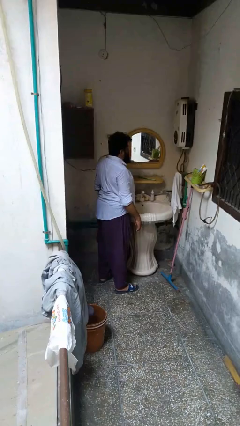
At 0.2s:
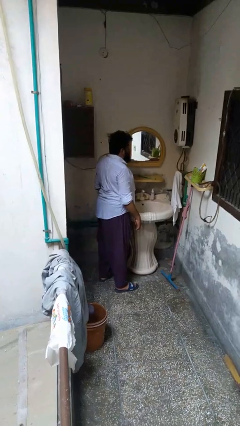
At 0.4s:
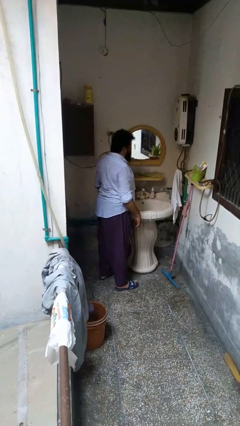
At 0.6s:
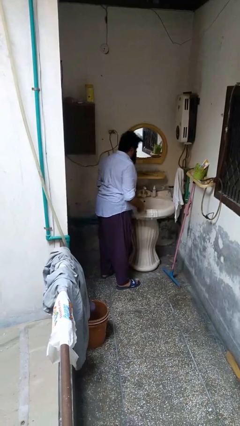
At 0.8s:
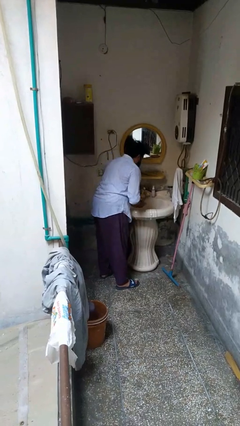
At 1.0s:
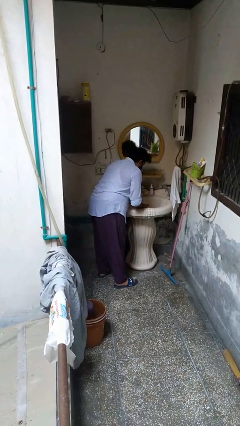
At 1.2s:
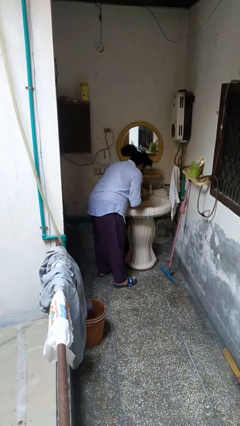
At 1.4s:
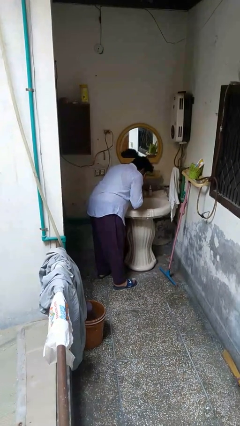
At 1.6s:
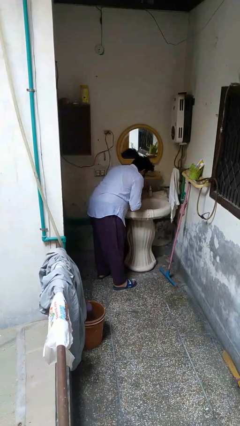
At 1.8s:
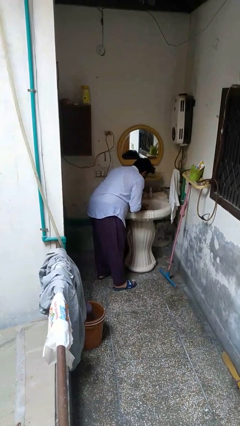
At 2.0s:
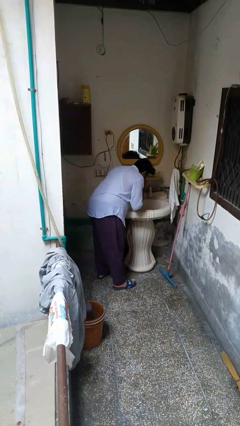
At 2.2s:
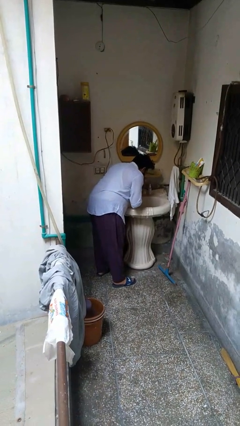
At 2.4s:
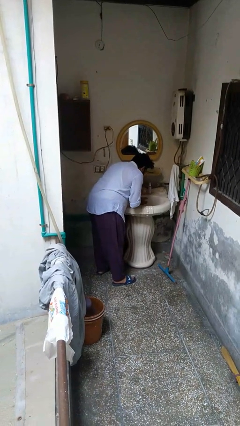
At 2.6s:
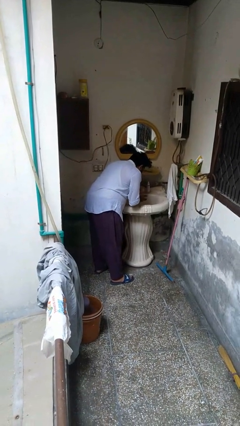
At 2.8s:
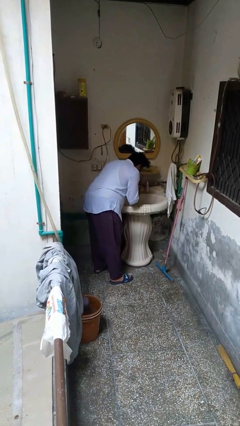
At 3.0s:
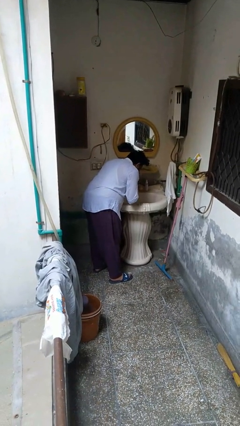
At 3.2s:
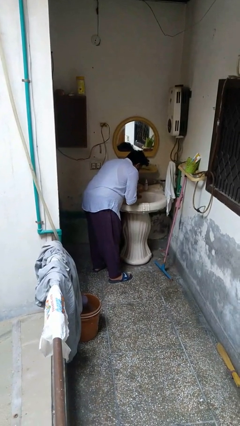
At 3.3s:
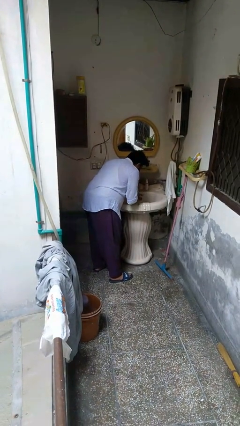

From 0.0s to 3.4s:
person washes face

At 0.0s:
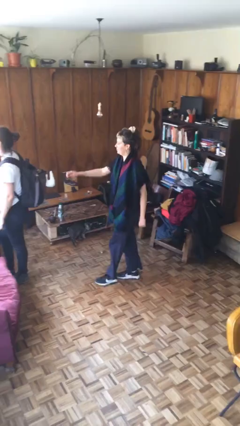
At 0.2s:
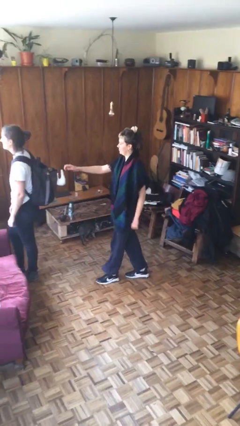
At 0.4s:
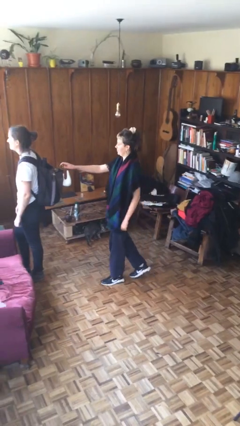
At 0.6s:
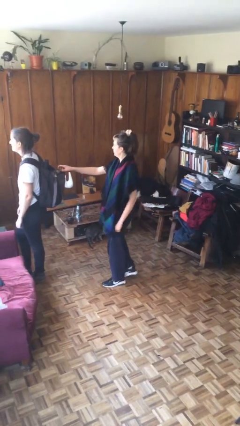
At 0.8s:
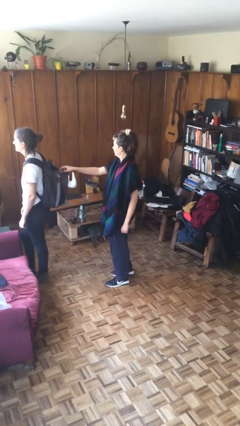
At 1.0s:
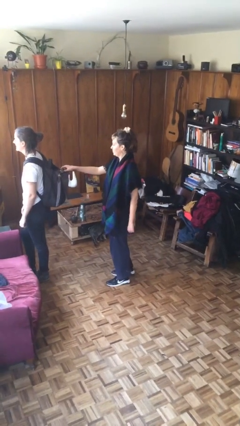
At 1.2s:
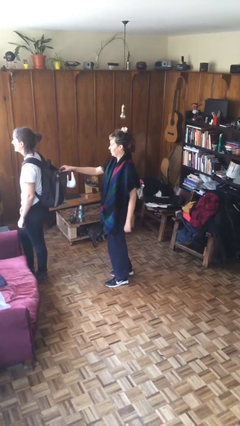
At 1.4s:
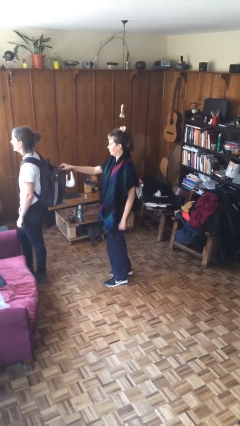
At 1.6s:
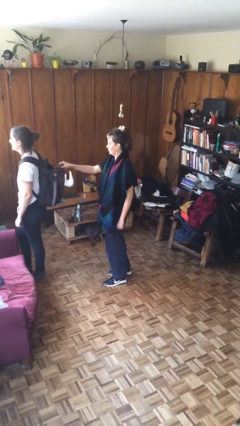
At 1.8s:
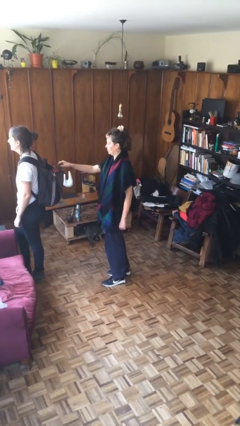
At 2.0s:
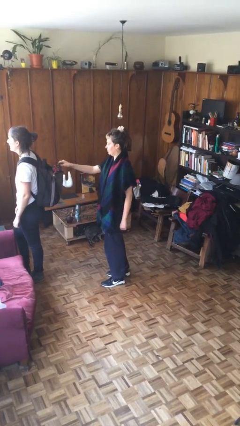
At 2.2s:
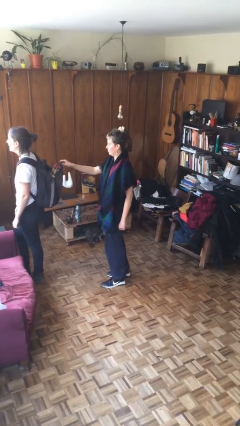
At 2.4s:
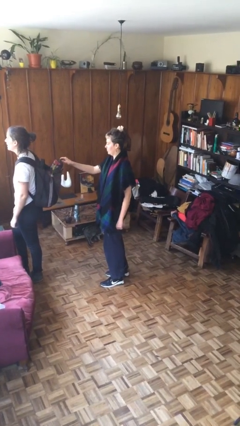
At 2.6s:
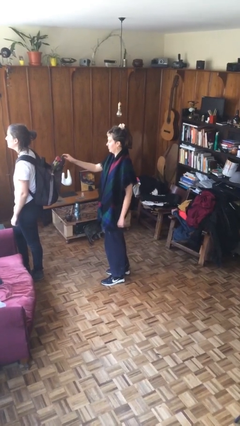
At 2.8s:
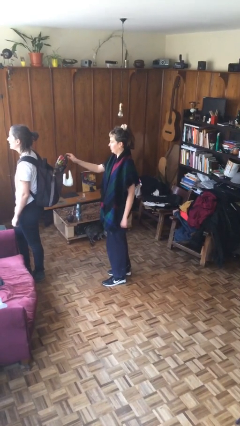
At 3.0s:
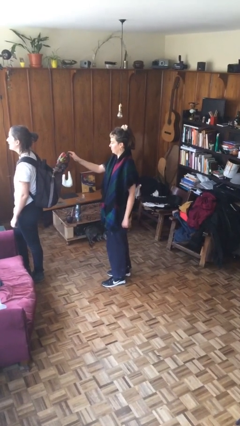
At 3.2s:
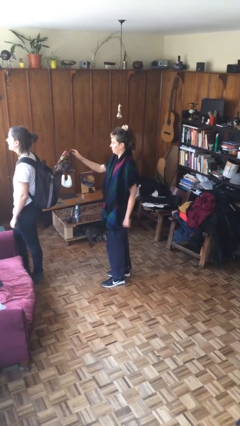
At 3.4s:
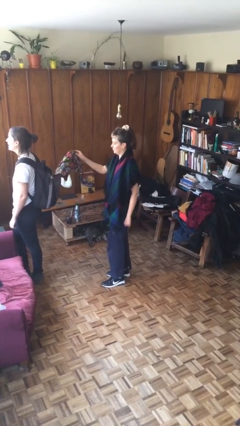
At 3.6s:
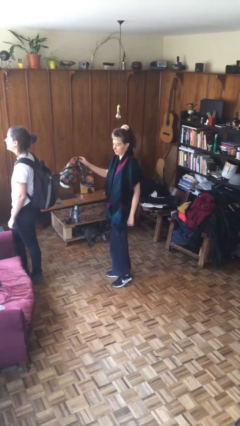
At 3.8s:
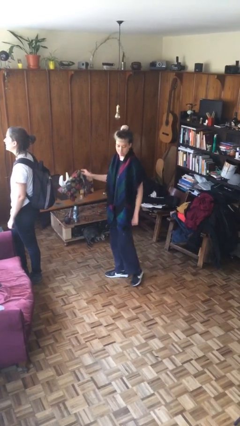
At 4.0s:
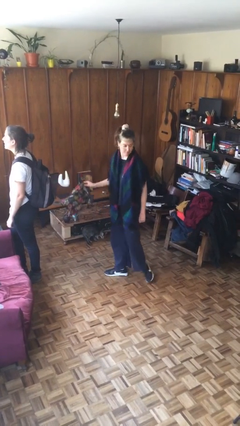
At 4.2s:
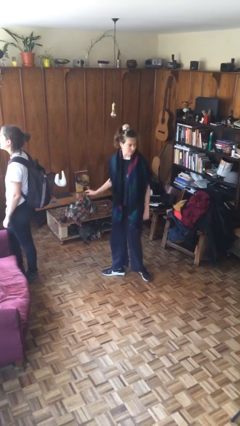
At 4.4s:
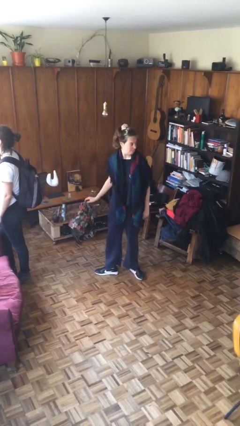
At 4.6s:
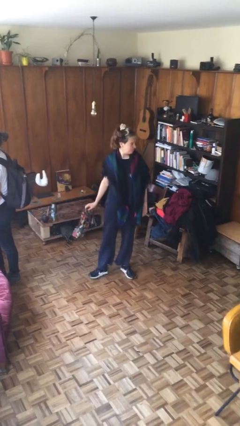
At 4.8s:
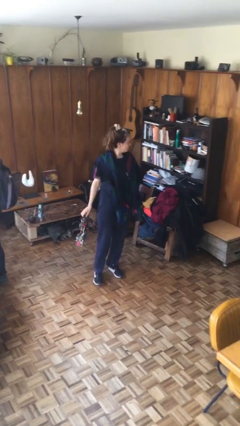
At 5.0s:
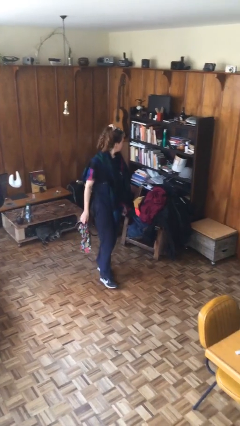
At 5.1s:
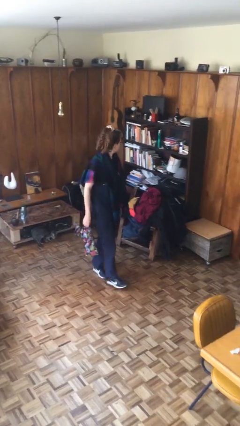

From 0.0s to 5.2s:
person steals object from person

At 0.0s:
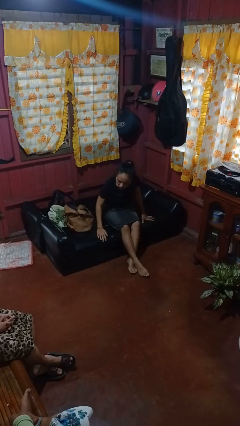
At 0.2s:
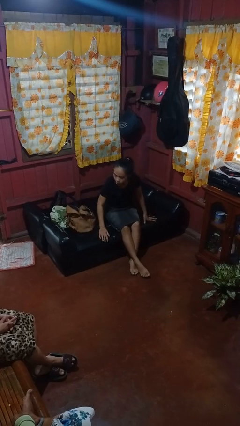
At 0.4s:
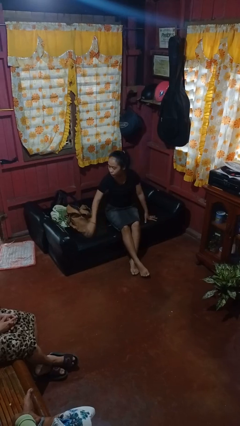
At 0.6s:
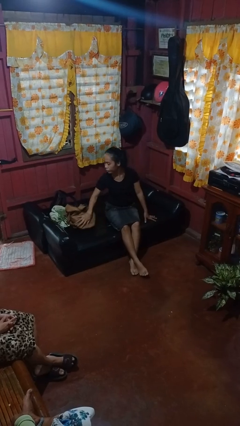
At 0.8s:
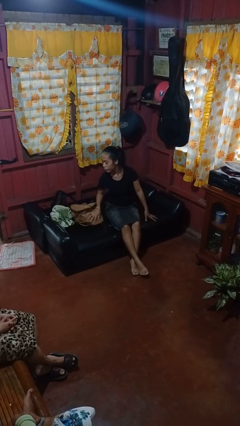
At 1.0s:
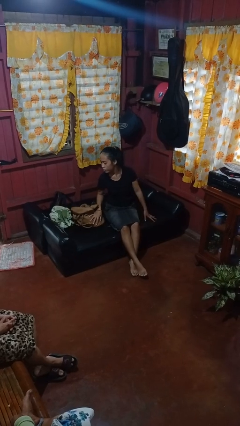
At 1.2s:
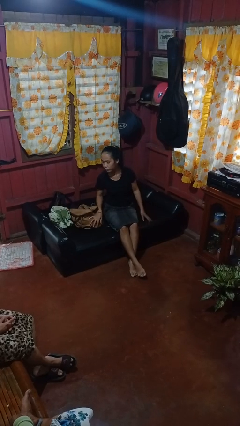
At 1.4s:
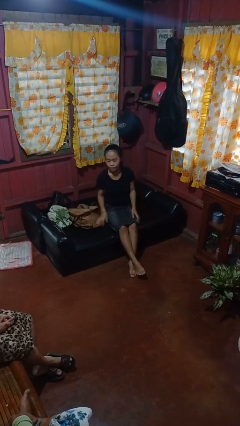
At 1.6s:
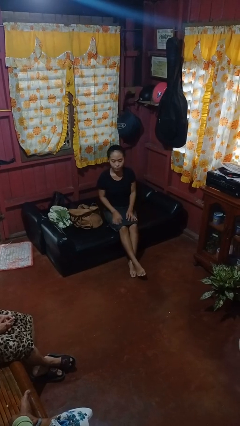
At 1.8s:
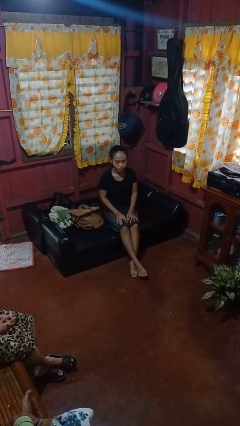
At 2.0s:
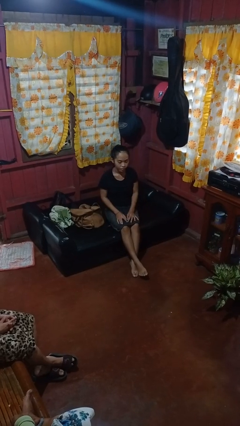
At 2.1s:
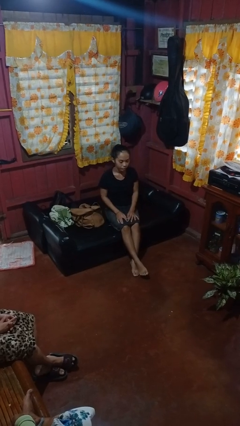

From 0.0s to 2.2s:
person searches in couch

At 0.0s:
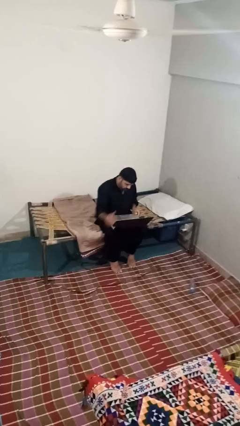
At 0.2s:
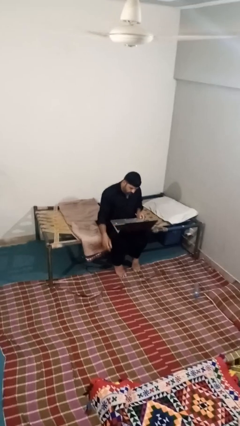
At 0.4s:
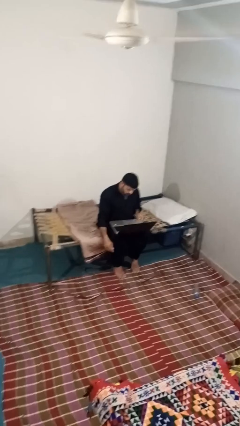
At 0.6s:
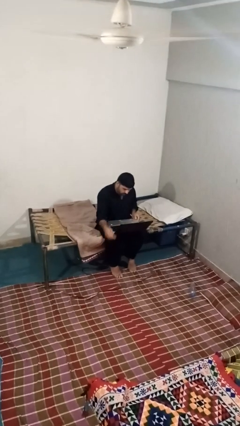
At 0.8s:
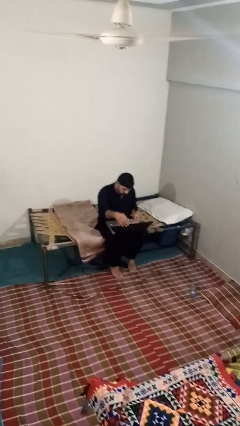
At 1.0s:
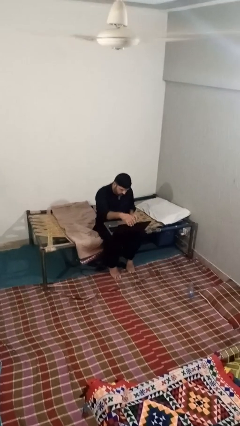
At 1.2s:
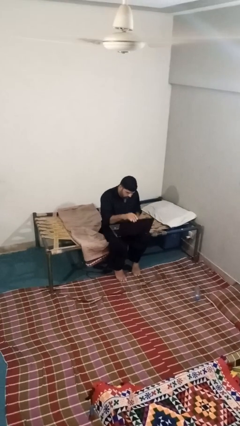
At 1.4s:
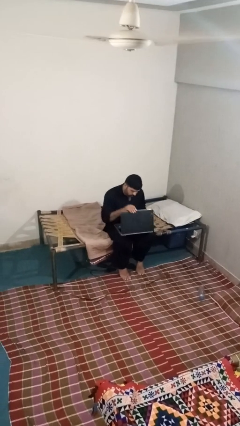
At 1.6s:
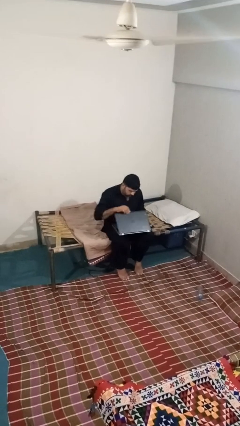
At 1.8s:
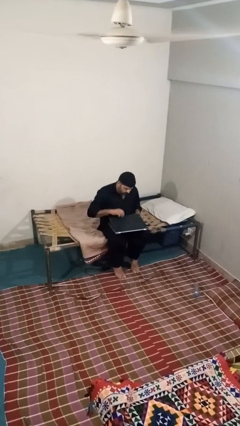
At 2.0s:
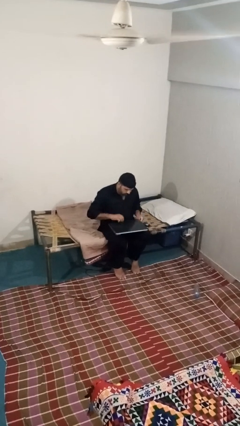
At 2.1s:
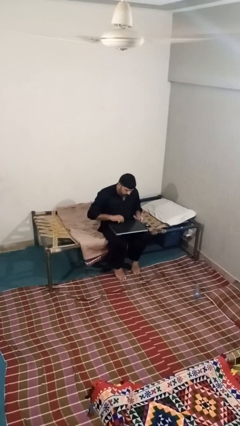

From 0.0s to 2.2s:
person closes laptop

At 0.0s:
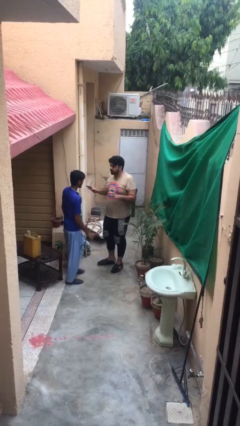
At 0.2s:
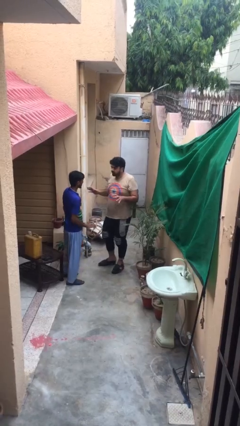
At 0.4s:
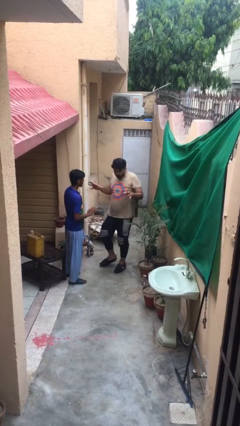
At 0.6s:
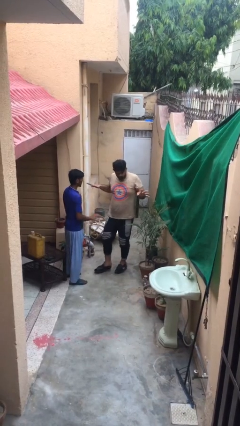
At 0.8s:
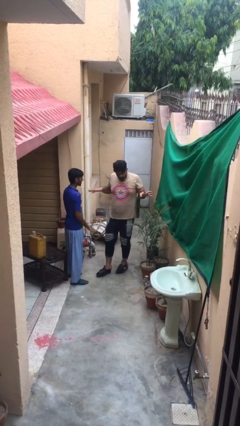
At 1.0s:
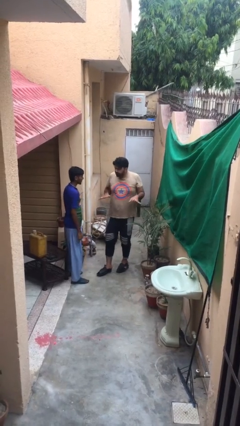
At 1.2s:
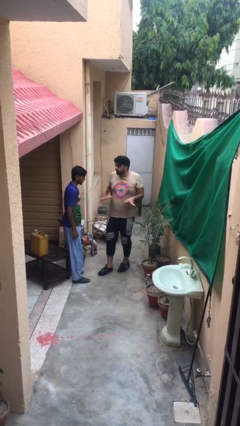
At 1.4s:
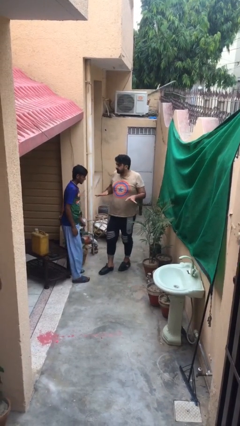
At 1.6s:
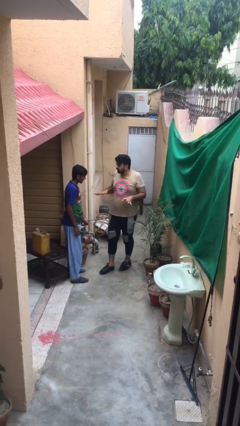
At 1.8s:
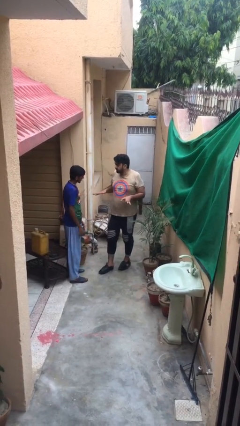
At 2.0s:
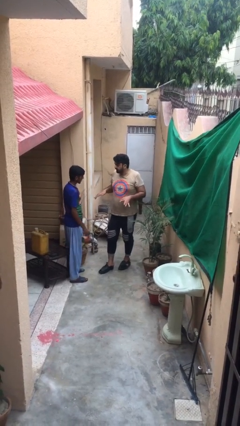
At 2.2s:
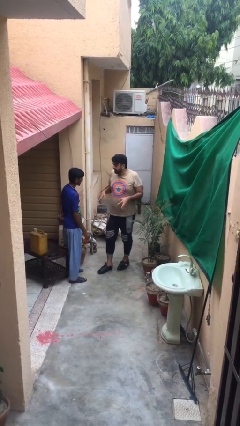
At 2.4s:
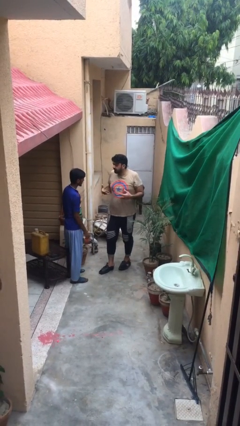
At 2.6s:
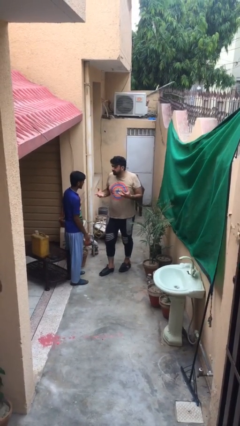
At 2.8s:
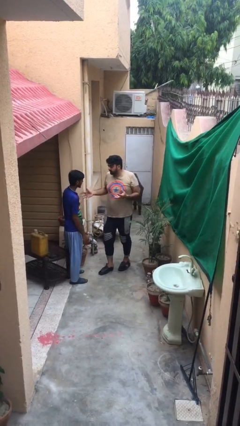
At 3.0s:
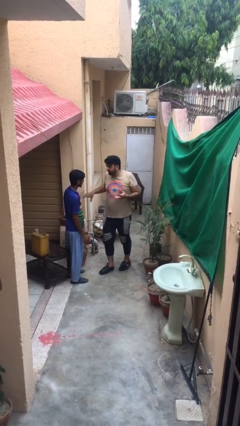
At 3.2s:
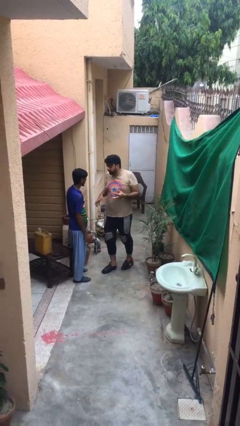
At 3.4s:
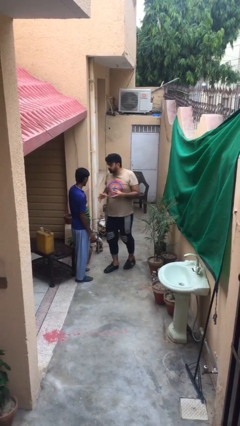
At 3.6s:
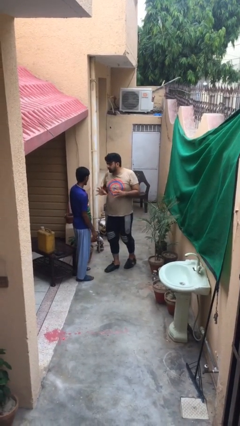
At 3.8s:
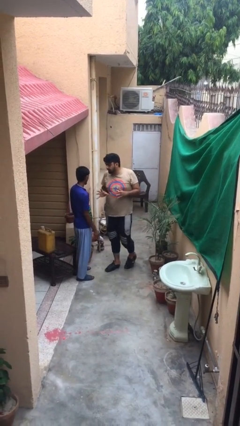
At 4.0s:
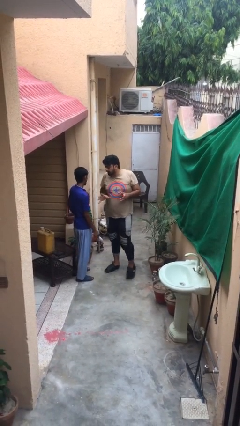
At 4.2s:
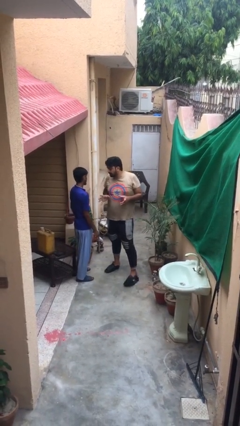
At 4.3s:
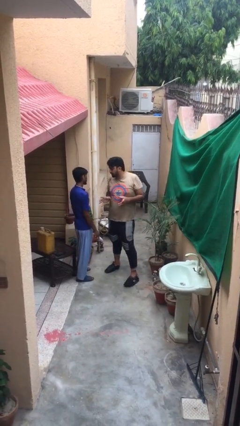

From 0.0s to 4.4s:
person talks to person
